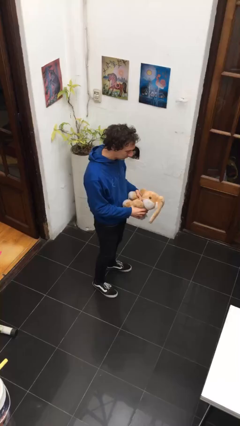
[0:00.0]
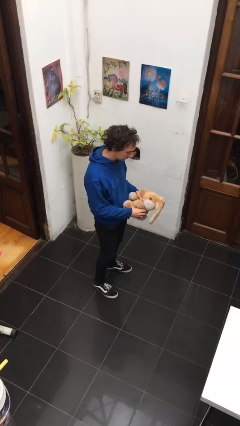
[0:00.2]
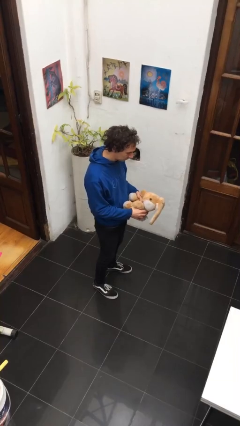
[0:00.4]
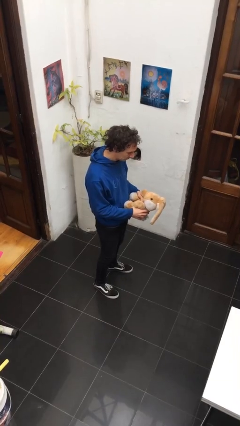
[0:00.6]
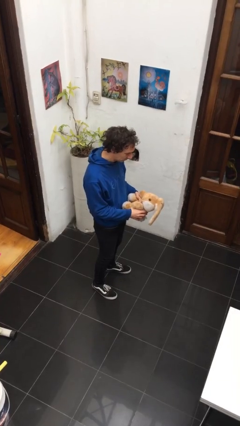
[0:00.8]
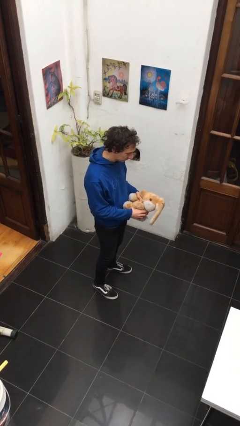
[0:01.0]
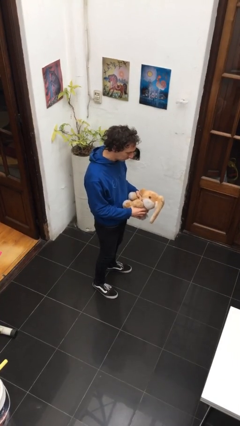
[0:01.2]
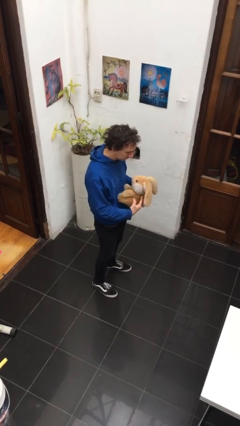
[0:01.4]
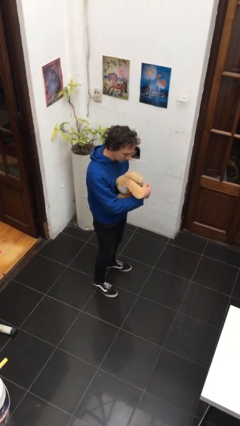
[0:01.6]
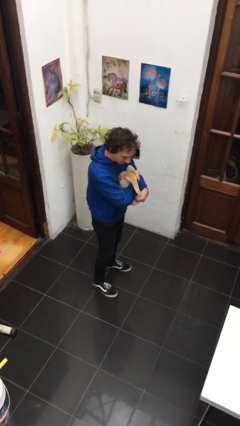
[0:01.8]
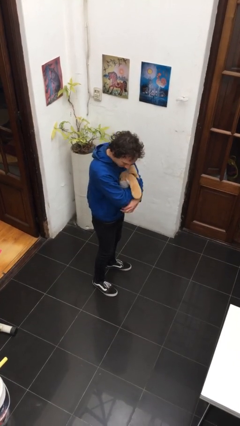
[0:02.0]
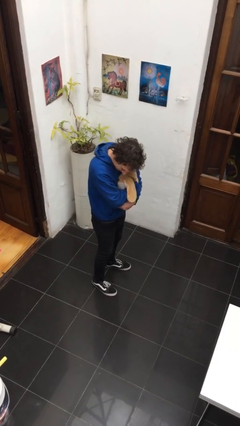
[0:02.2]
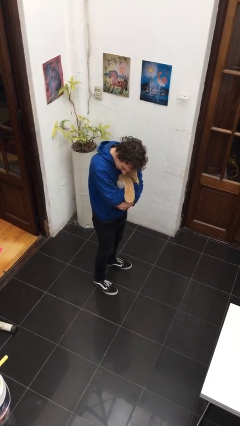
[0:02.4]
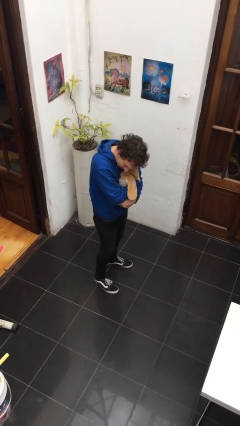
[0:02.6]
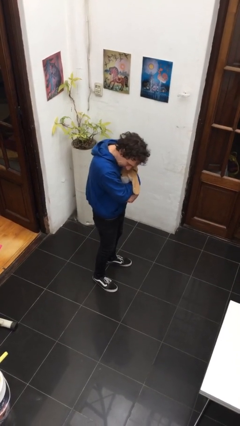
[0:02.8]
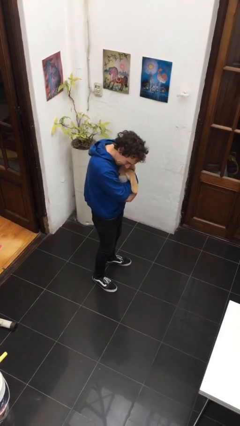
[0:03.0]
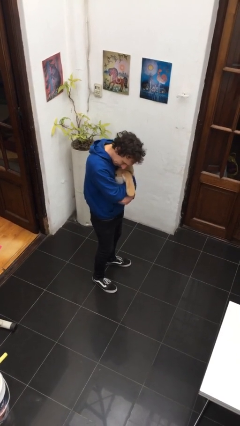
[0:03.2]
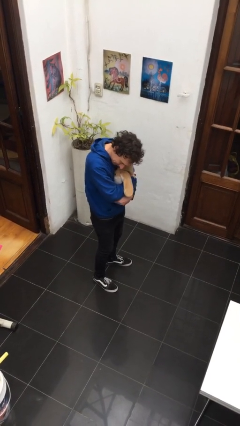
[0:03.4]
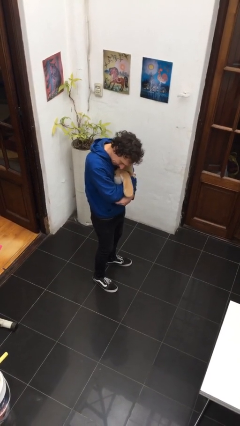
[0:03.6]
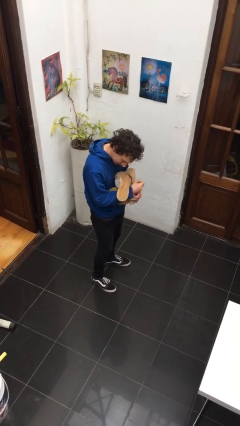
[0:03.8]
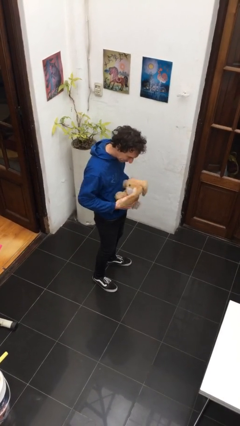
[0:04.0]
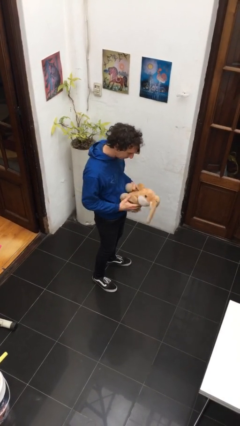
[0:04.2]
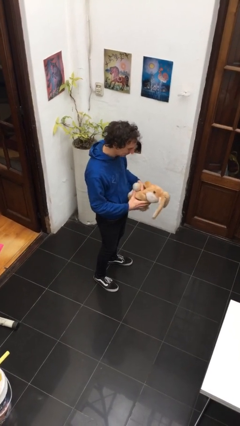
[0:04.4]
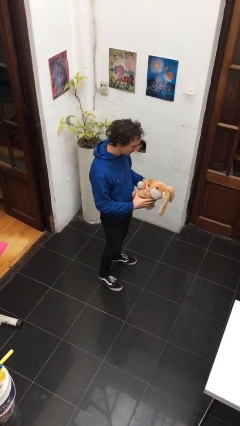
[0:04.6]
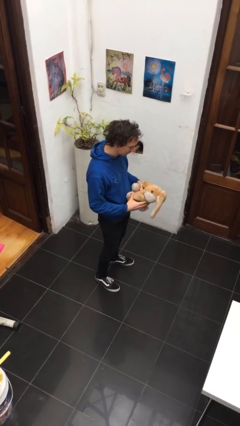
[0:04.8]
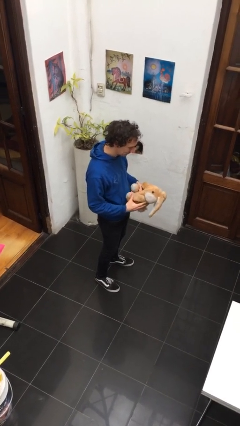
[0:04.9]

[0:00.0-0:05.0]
person hugs stuffed animal

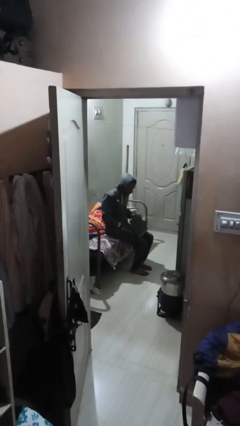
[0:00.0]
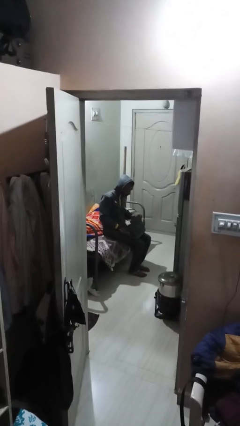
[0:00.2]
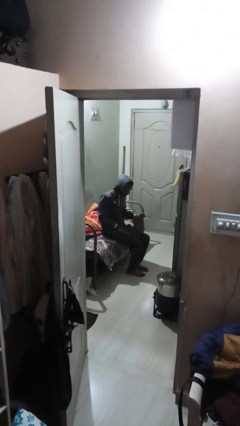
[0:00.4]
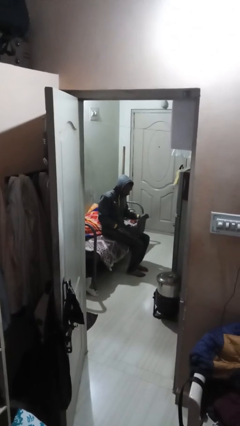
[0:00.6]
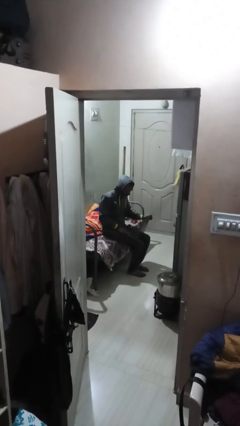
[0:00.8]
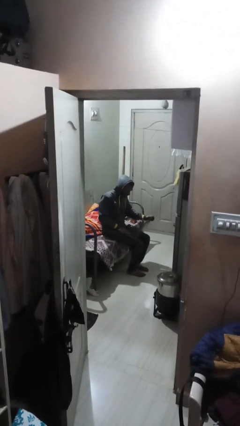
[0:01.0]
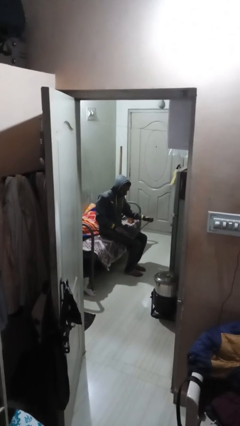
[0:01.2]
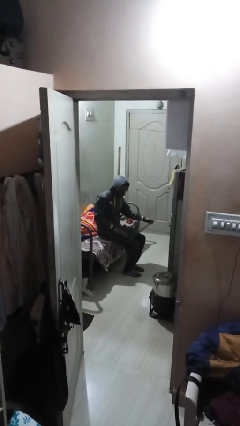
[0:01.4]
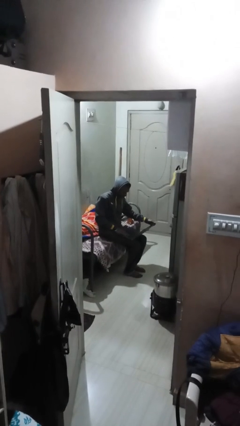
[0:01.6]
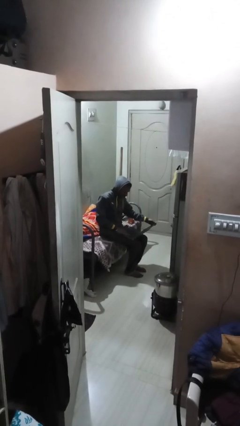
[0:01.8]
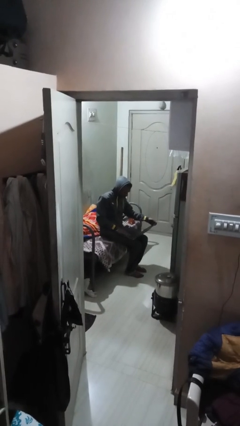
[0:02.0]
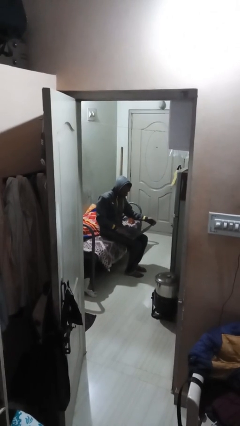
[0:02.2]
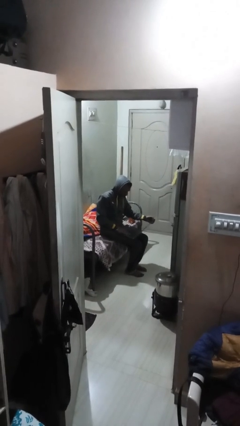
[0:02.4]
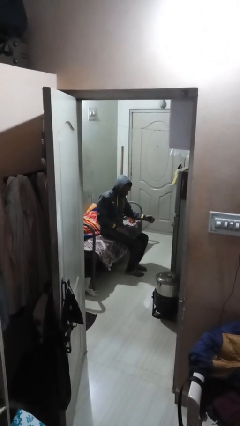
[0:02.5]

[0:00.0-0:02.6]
person interacts with laptop

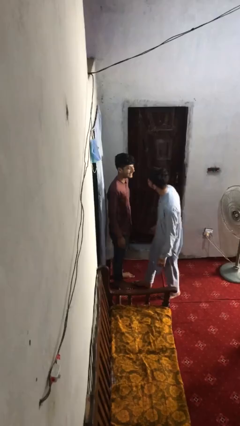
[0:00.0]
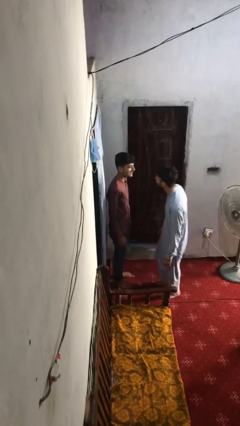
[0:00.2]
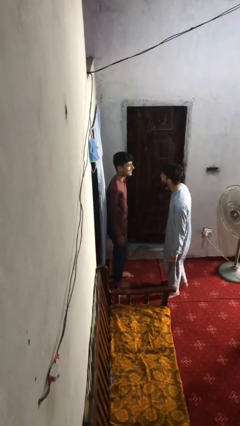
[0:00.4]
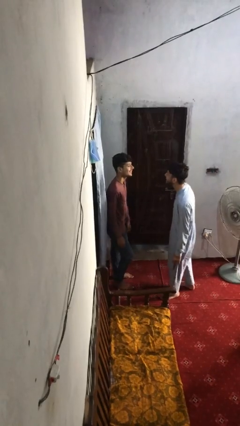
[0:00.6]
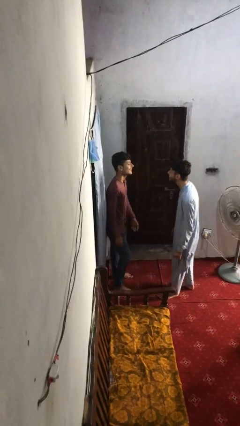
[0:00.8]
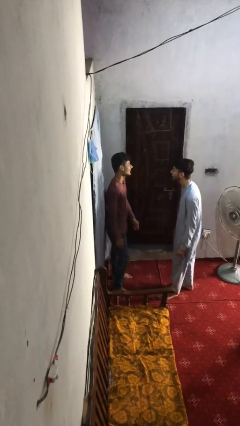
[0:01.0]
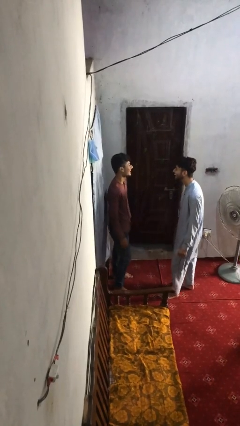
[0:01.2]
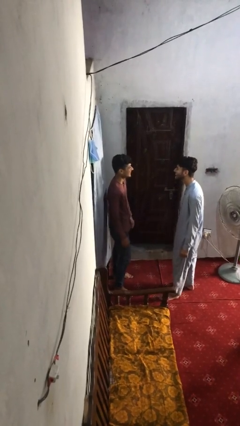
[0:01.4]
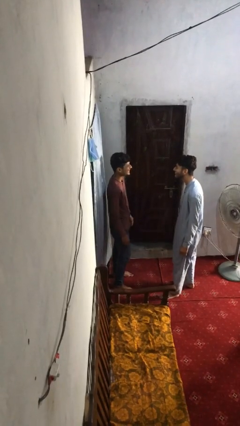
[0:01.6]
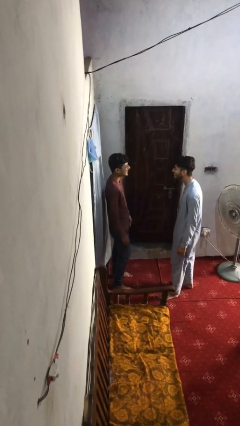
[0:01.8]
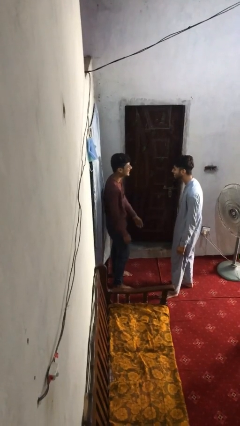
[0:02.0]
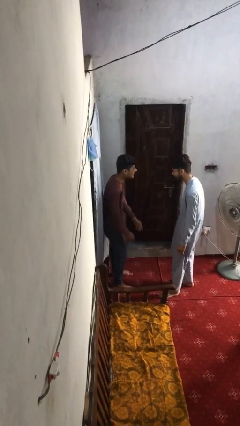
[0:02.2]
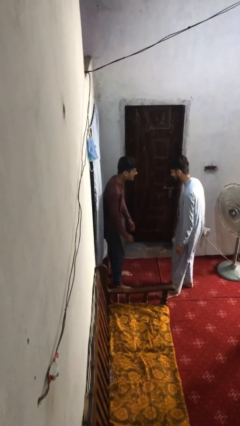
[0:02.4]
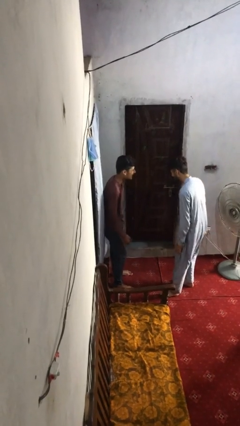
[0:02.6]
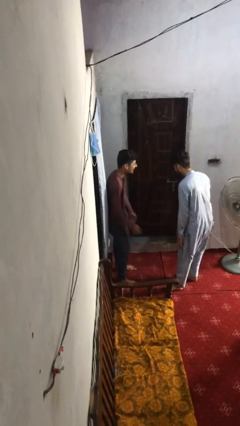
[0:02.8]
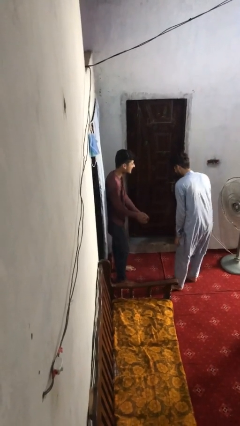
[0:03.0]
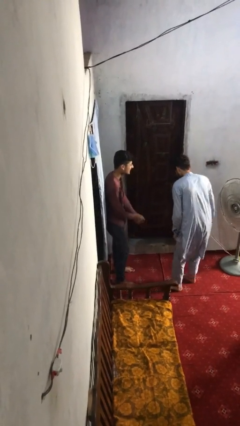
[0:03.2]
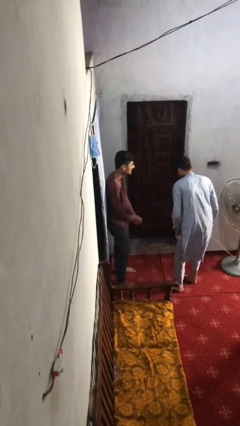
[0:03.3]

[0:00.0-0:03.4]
person talks to person

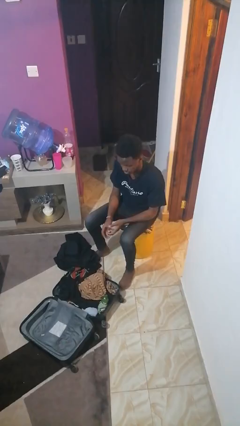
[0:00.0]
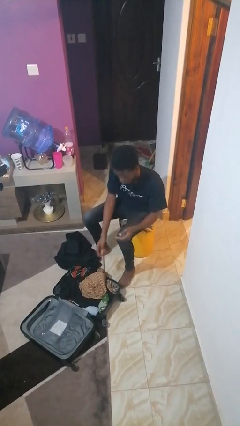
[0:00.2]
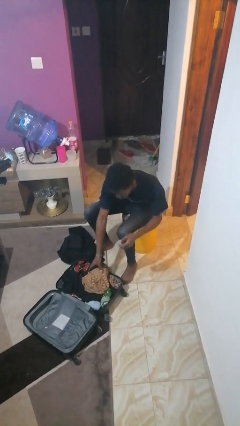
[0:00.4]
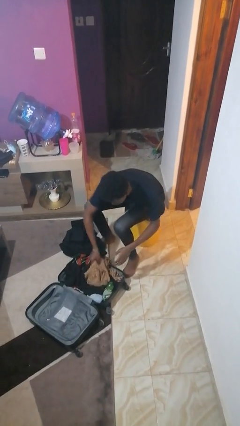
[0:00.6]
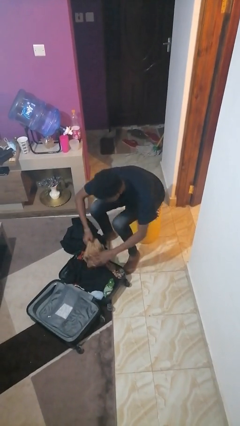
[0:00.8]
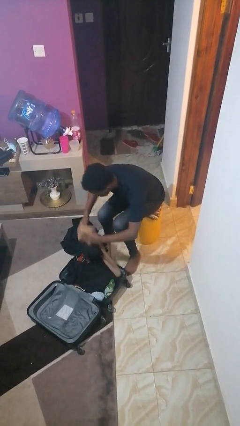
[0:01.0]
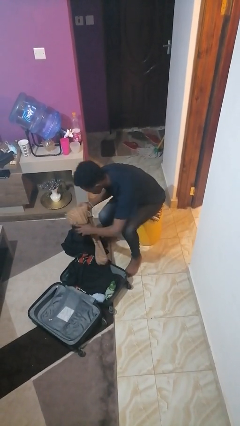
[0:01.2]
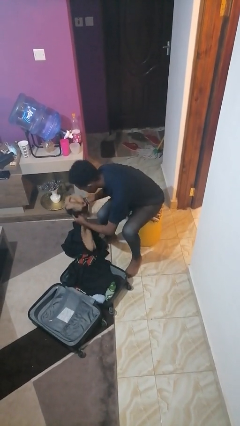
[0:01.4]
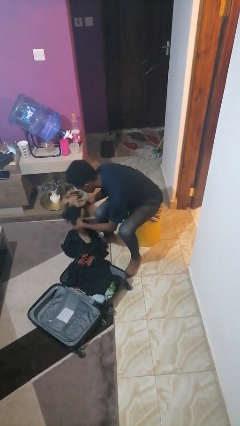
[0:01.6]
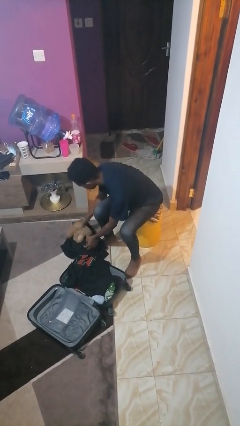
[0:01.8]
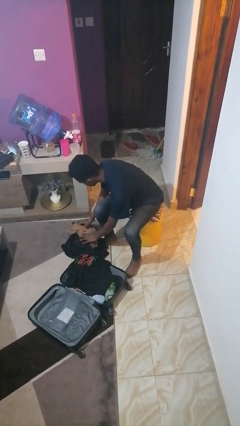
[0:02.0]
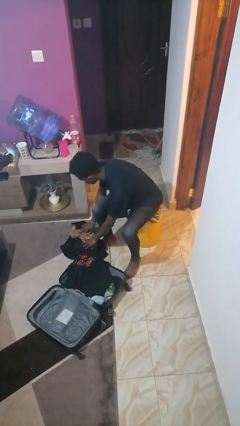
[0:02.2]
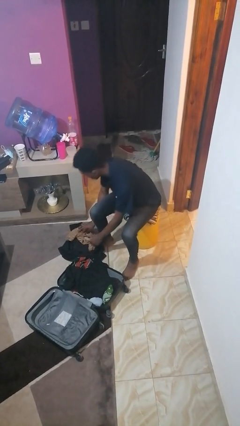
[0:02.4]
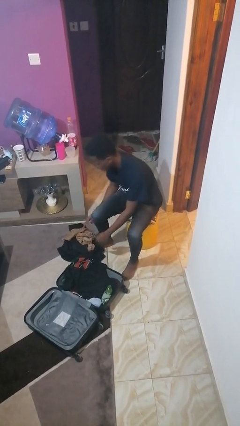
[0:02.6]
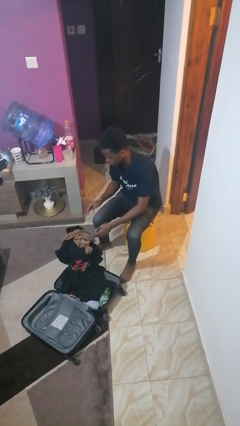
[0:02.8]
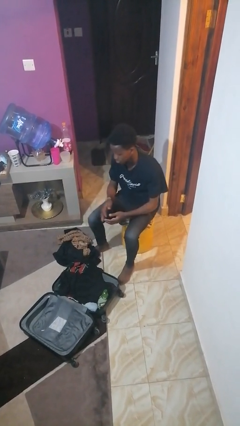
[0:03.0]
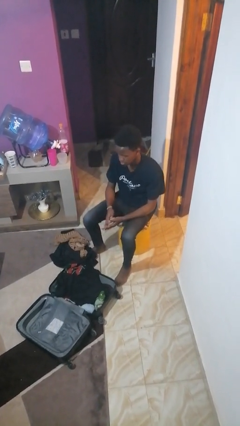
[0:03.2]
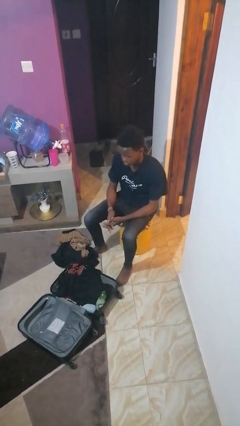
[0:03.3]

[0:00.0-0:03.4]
person unloads clothes from suitcase

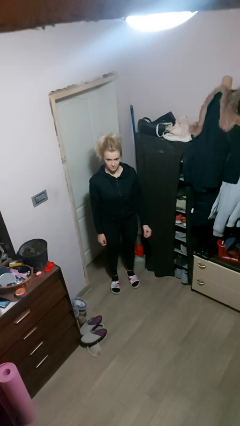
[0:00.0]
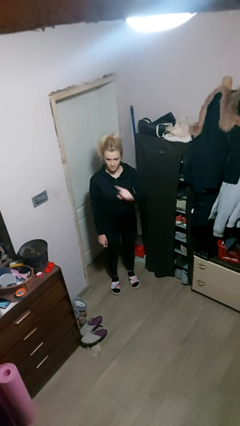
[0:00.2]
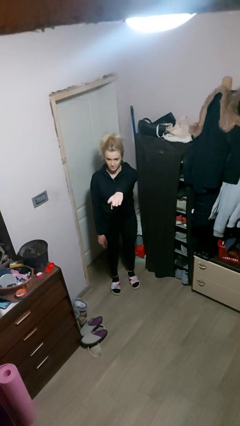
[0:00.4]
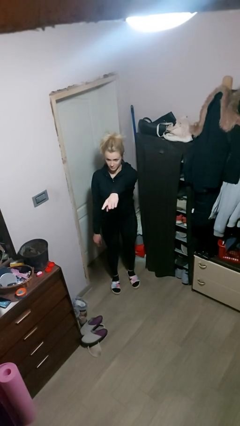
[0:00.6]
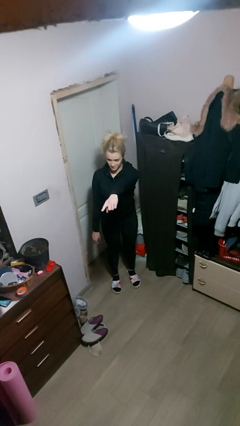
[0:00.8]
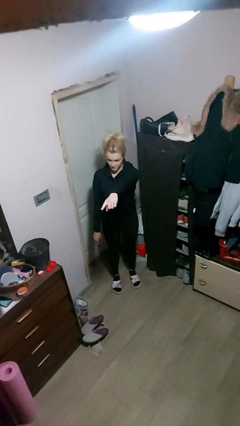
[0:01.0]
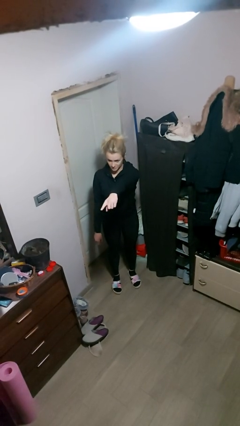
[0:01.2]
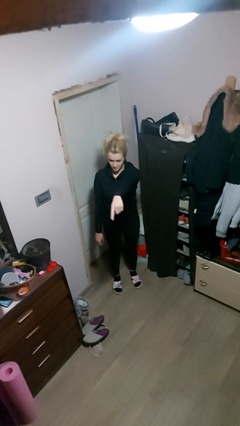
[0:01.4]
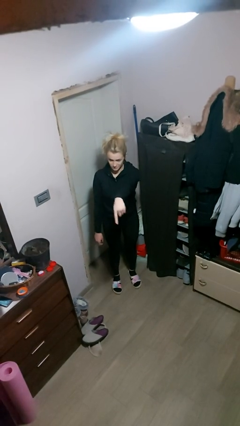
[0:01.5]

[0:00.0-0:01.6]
person points at person

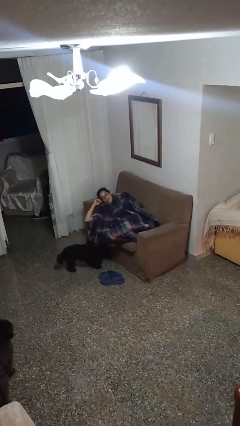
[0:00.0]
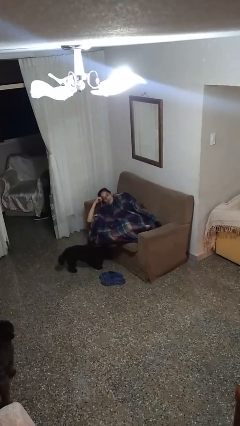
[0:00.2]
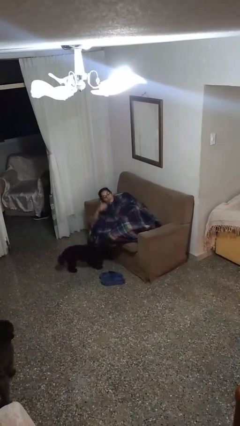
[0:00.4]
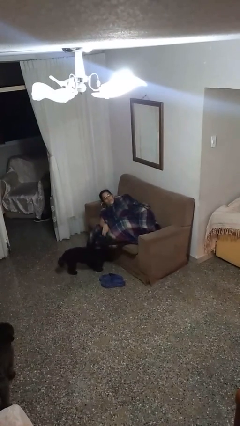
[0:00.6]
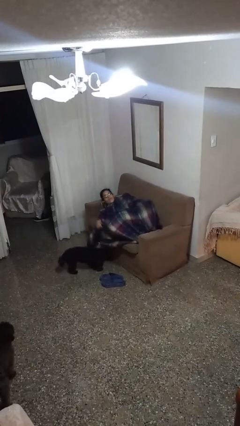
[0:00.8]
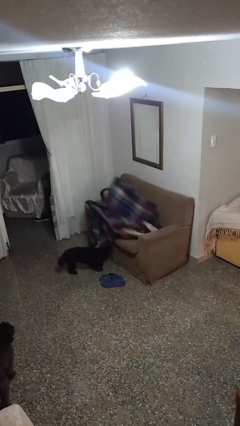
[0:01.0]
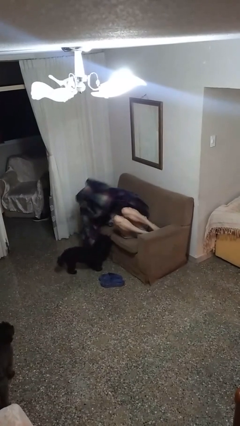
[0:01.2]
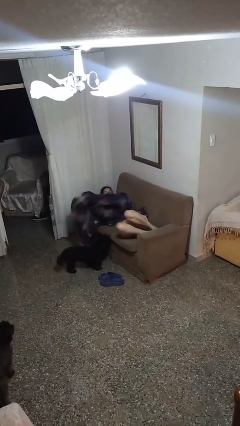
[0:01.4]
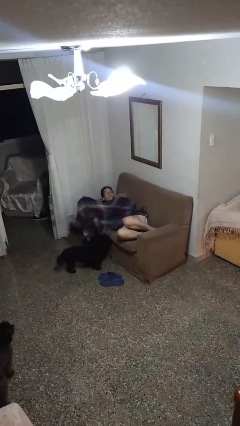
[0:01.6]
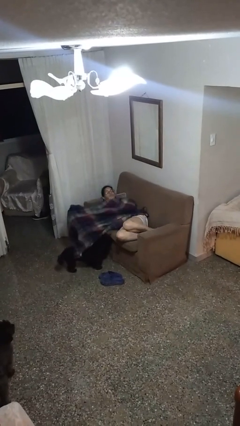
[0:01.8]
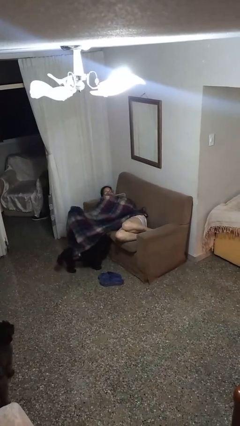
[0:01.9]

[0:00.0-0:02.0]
person uncovers with blanket
